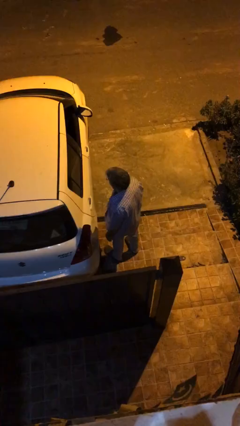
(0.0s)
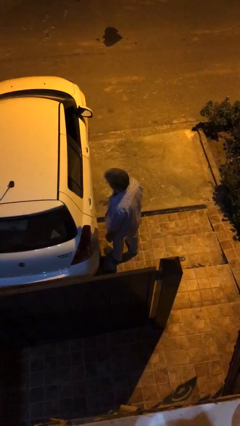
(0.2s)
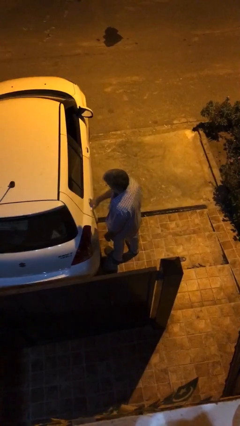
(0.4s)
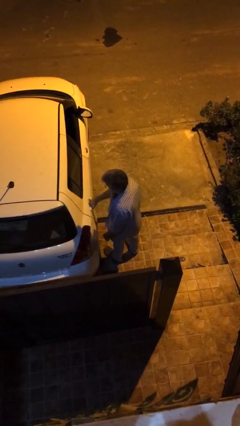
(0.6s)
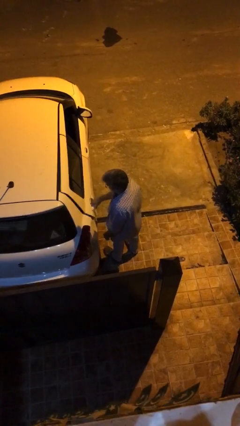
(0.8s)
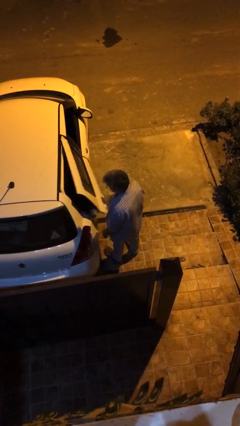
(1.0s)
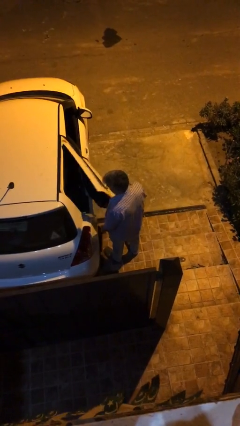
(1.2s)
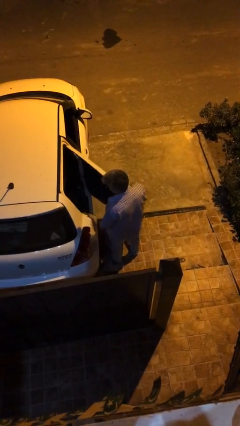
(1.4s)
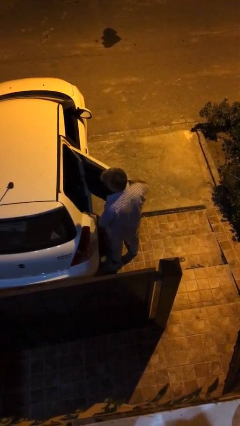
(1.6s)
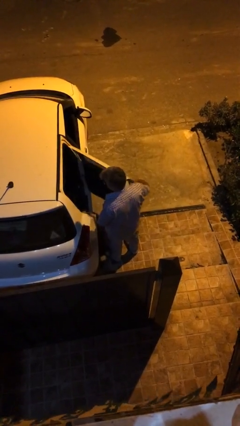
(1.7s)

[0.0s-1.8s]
person opens car door

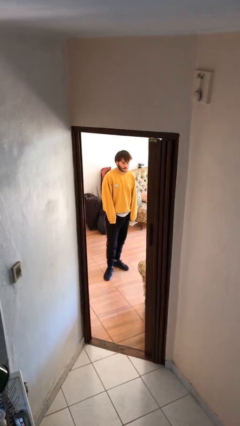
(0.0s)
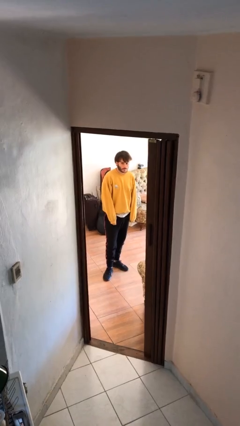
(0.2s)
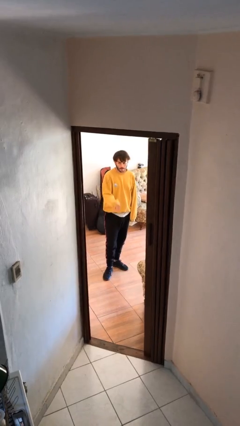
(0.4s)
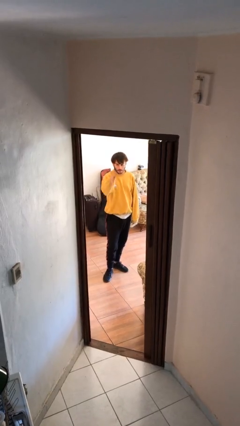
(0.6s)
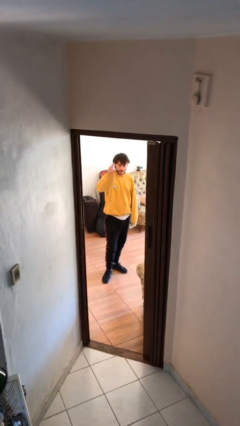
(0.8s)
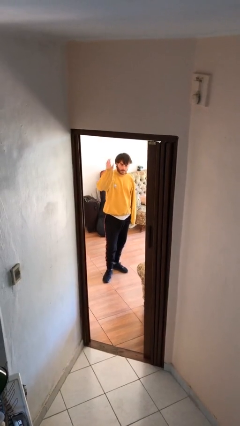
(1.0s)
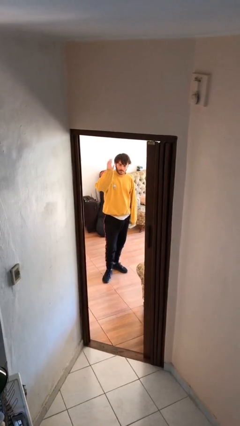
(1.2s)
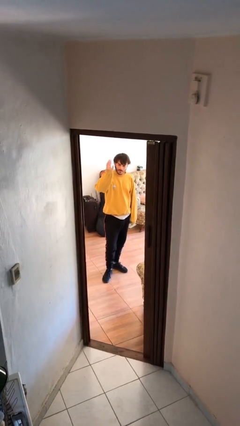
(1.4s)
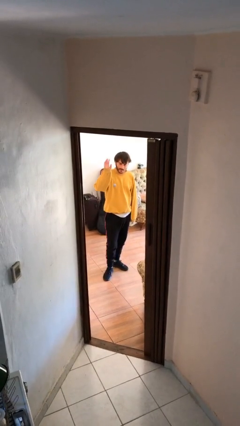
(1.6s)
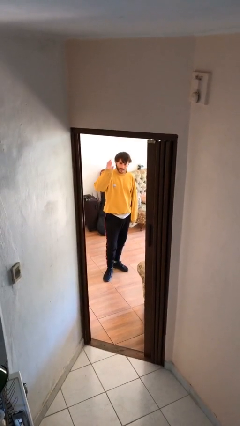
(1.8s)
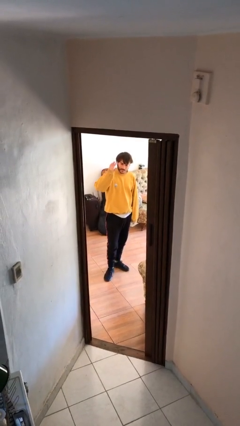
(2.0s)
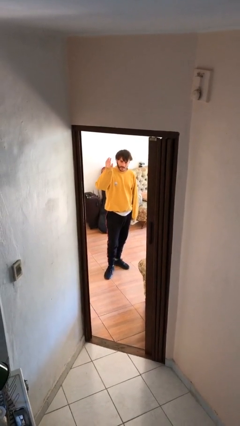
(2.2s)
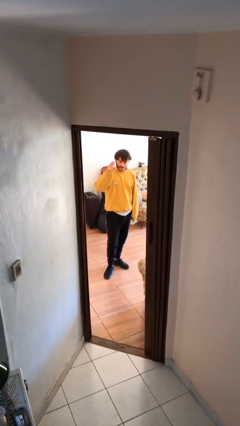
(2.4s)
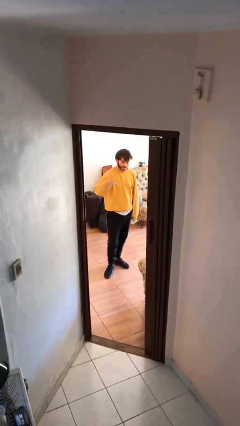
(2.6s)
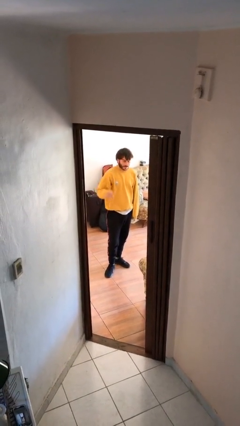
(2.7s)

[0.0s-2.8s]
person waves at person

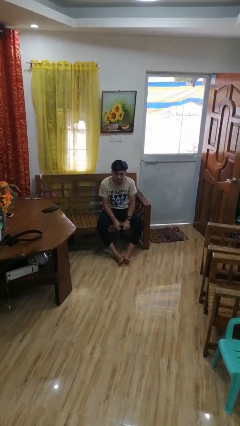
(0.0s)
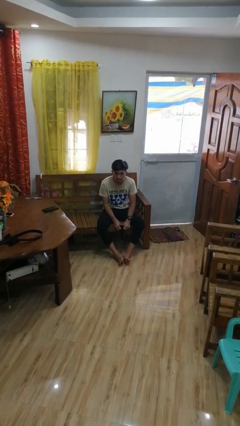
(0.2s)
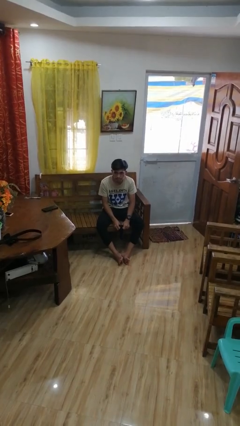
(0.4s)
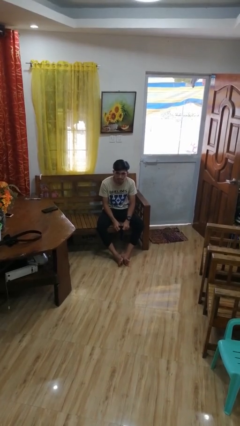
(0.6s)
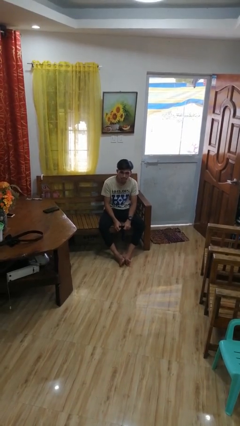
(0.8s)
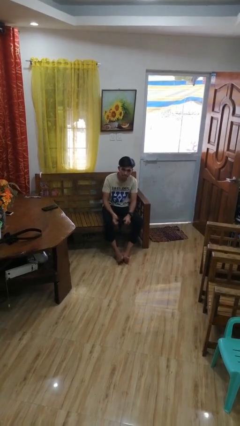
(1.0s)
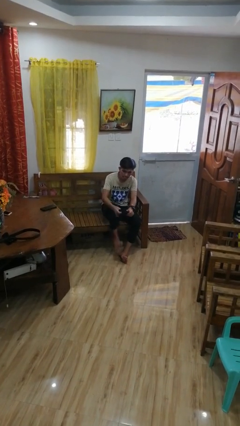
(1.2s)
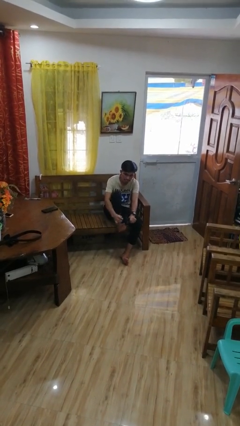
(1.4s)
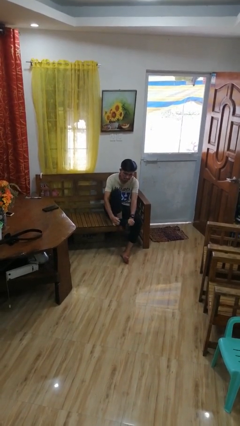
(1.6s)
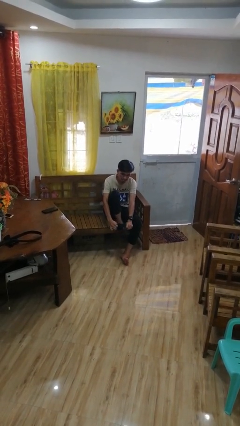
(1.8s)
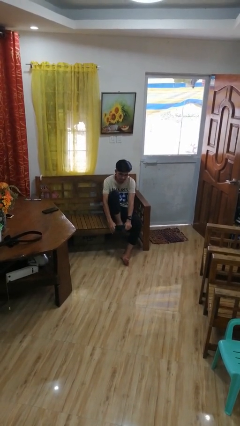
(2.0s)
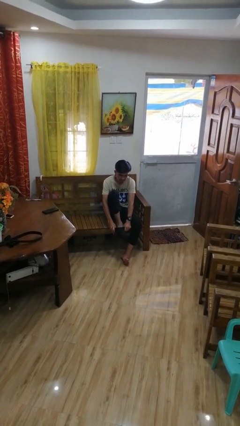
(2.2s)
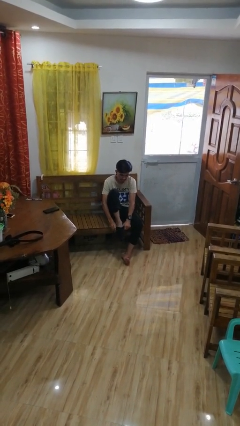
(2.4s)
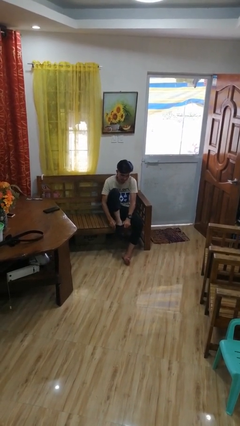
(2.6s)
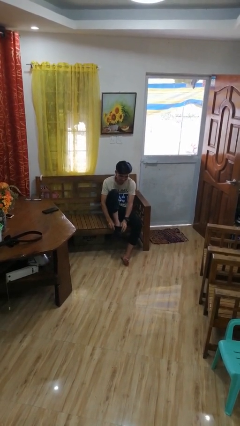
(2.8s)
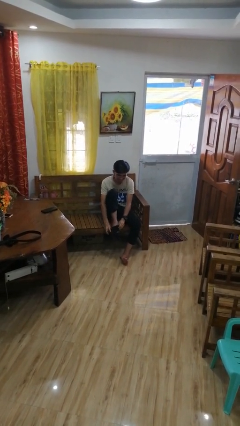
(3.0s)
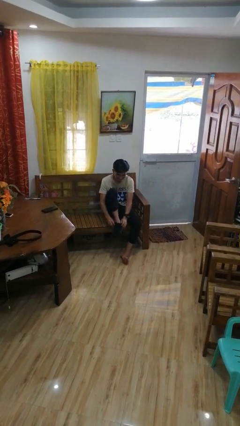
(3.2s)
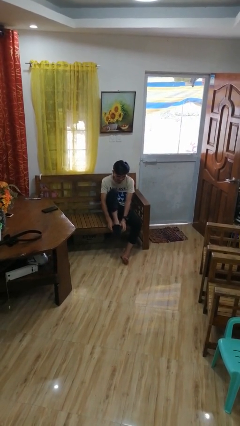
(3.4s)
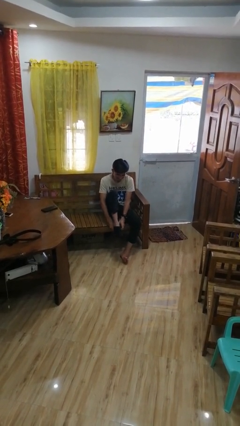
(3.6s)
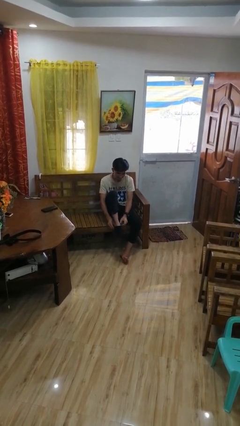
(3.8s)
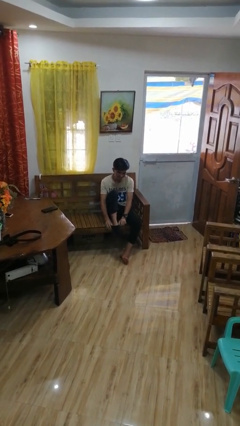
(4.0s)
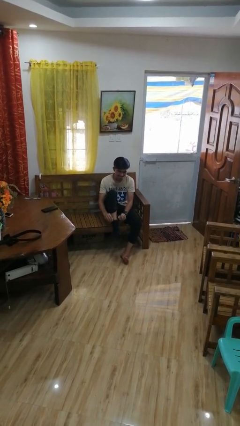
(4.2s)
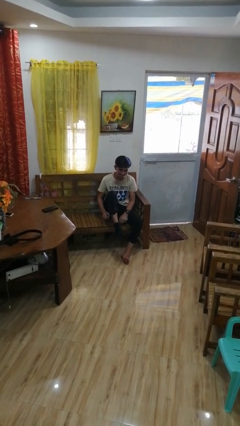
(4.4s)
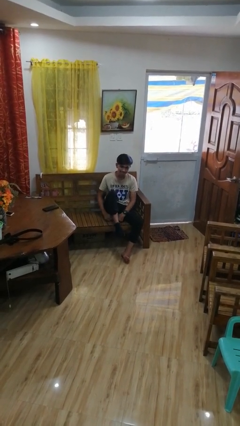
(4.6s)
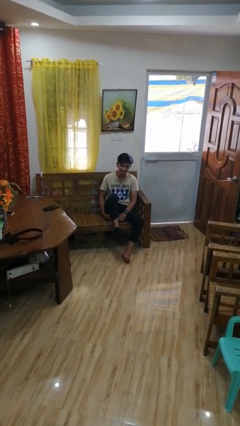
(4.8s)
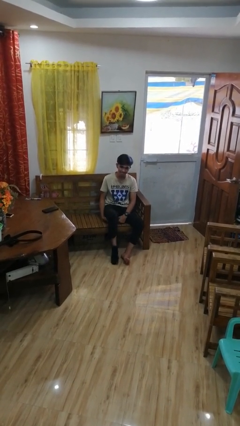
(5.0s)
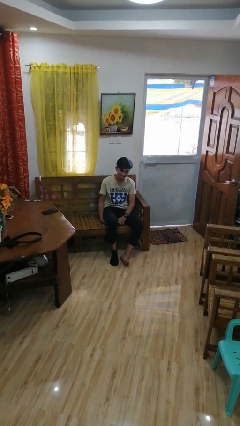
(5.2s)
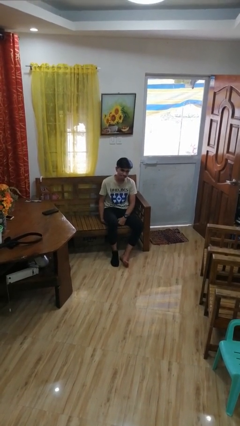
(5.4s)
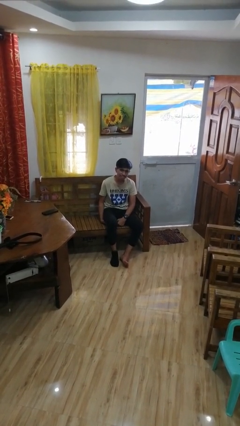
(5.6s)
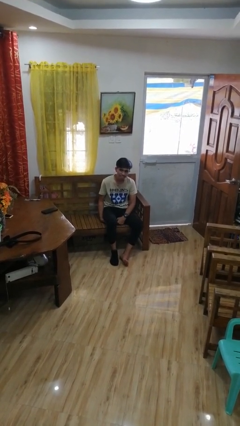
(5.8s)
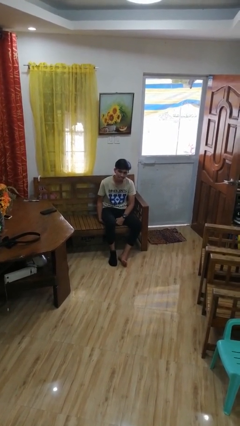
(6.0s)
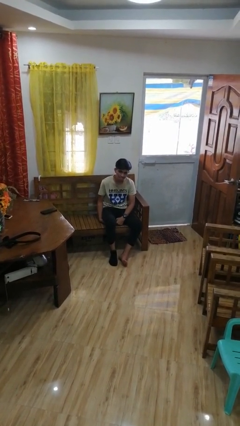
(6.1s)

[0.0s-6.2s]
person puts on socks

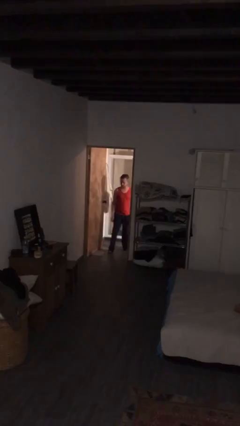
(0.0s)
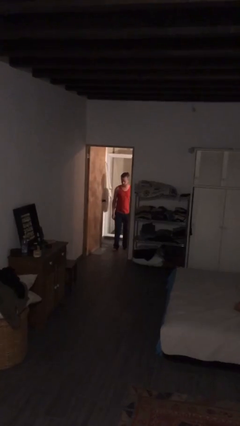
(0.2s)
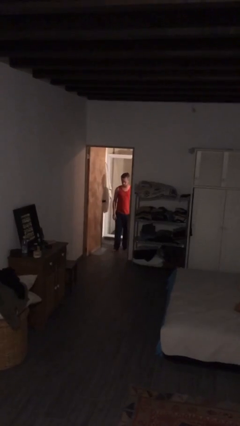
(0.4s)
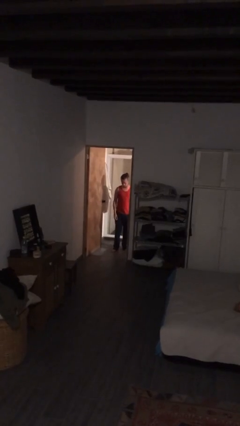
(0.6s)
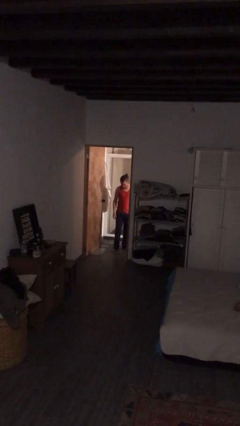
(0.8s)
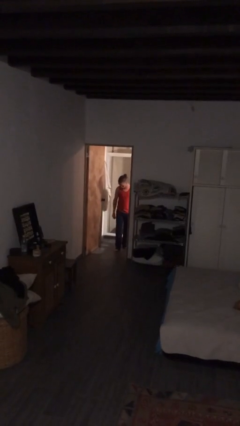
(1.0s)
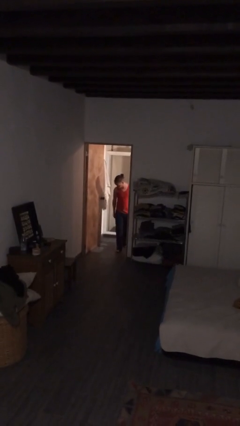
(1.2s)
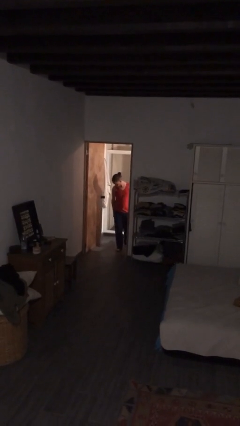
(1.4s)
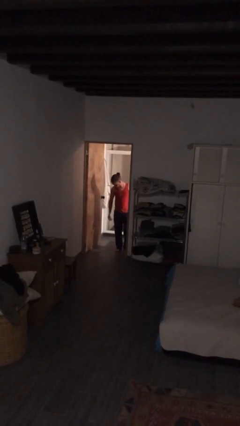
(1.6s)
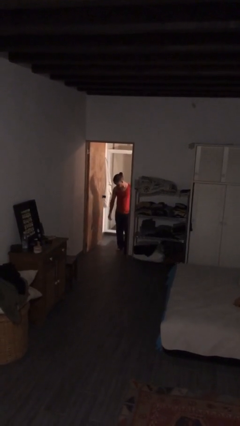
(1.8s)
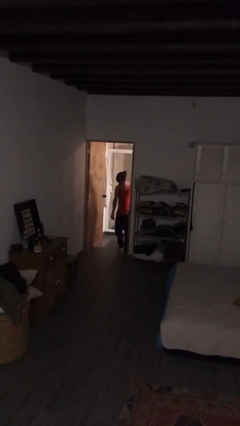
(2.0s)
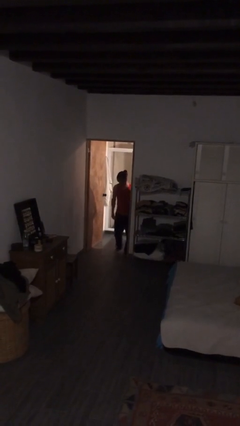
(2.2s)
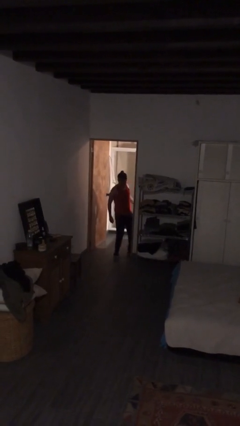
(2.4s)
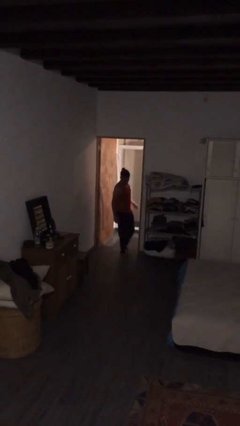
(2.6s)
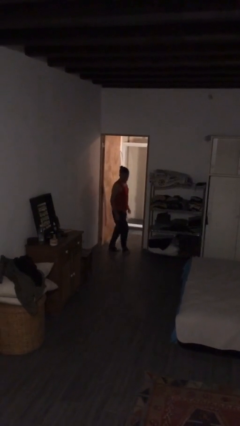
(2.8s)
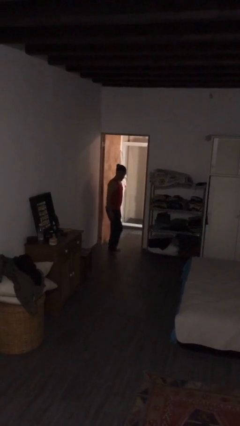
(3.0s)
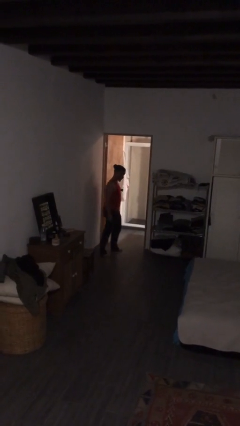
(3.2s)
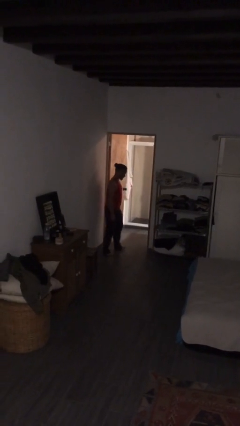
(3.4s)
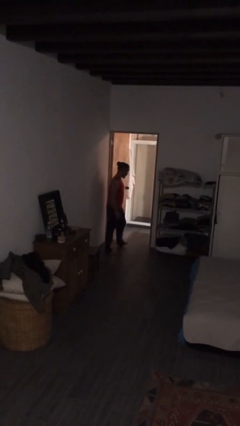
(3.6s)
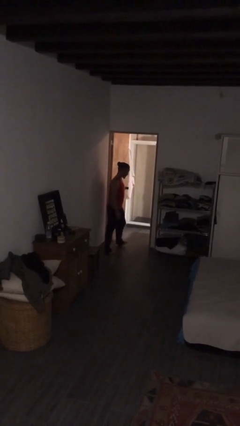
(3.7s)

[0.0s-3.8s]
person bumps into wall

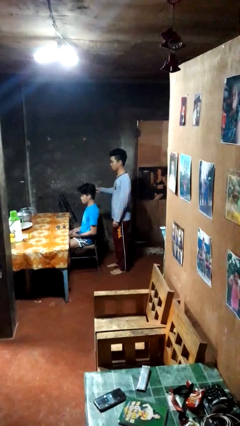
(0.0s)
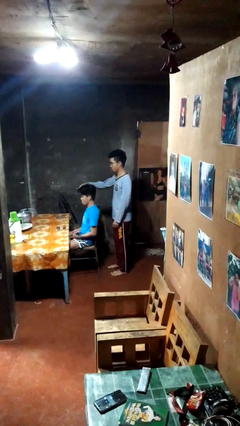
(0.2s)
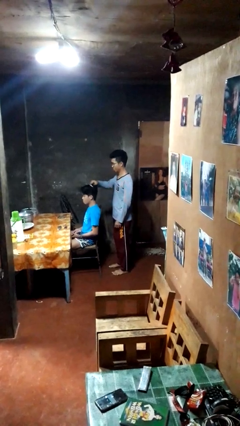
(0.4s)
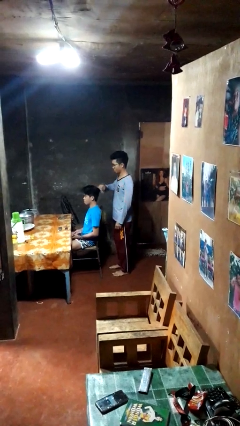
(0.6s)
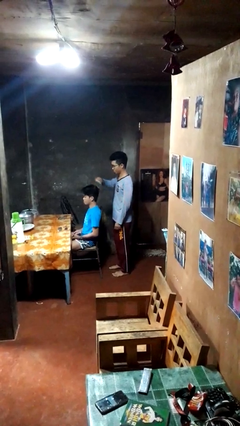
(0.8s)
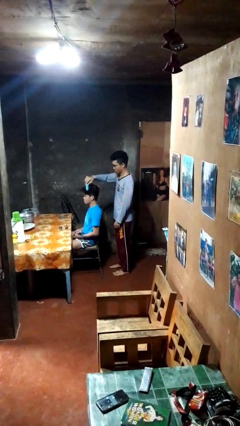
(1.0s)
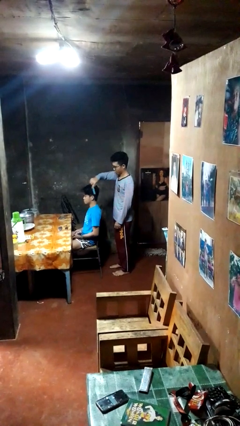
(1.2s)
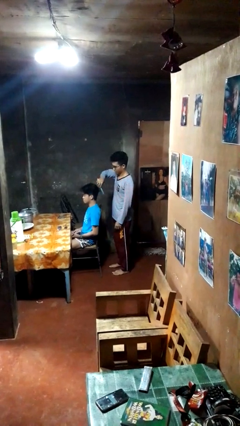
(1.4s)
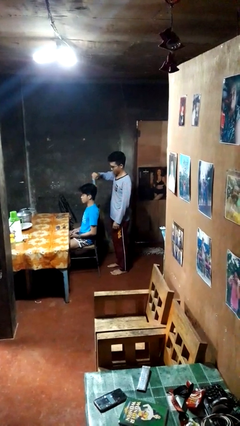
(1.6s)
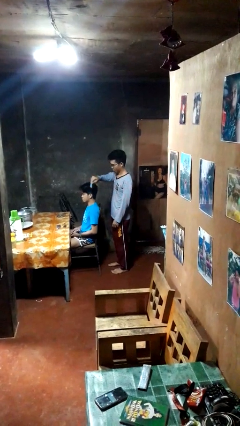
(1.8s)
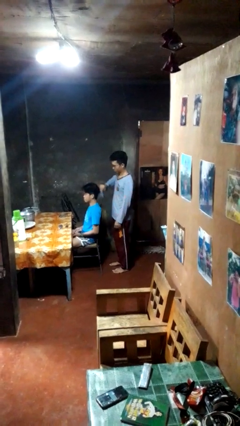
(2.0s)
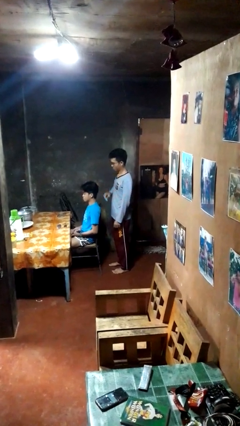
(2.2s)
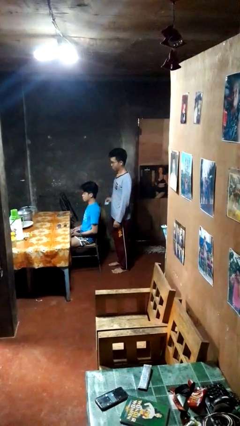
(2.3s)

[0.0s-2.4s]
person brushes hair of person

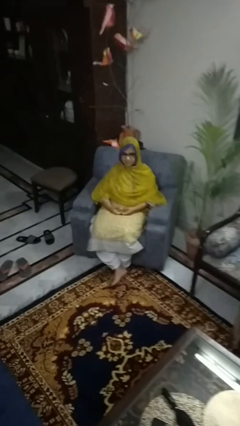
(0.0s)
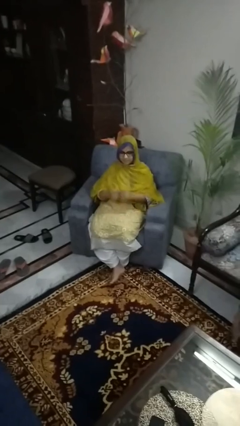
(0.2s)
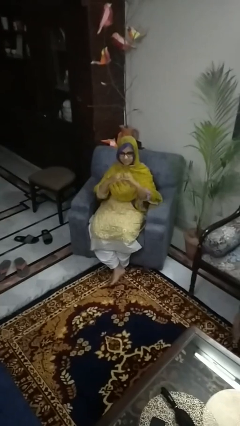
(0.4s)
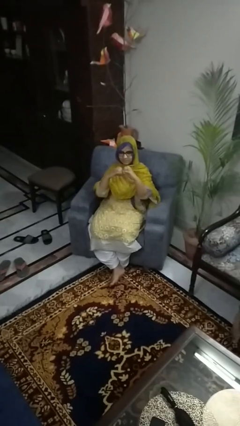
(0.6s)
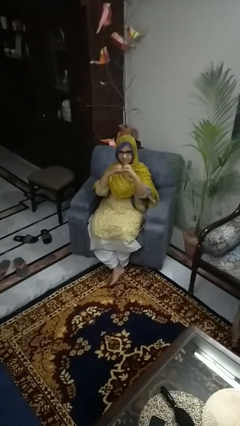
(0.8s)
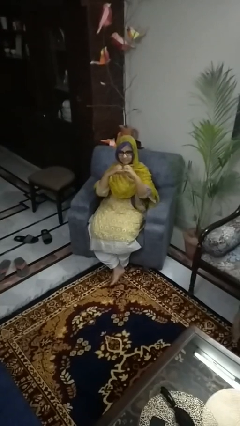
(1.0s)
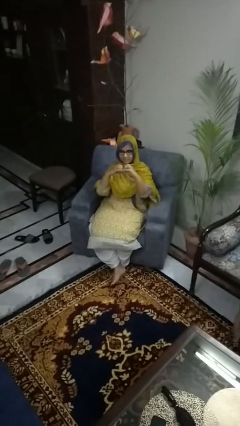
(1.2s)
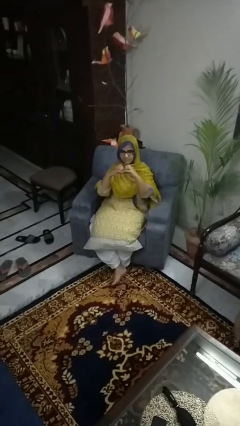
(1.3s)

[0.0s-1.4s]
person gestures heart
